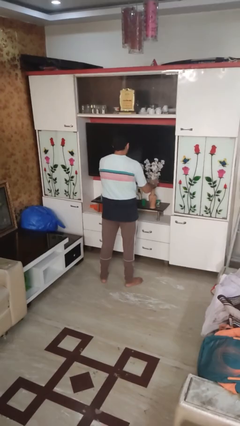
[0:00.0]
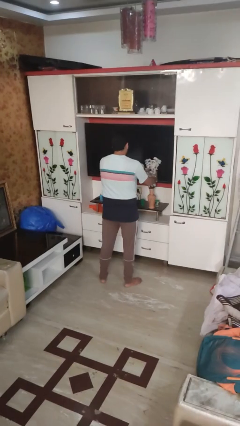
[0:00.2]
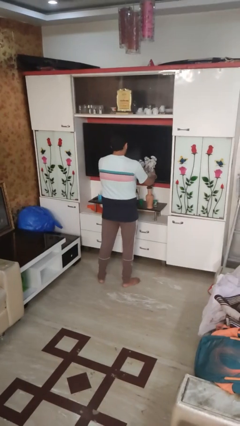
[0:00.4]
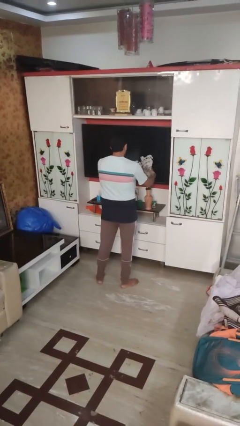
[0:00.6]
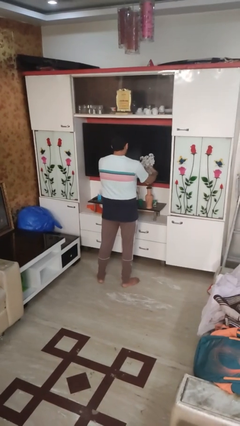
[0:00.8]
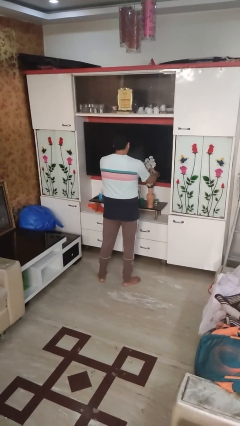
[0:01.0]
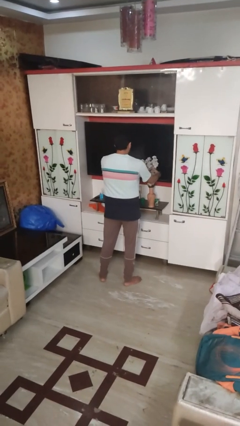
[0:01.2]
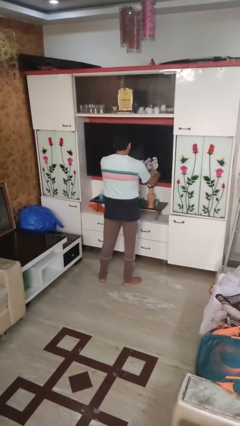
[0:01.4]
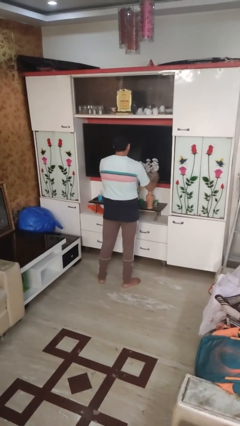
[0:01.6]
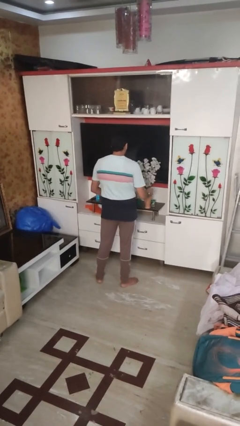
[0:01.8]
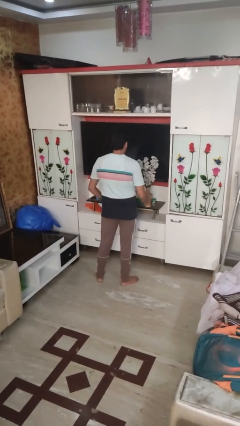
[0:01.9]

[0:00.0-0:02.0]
person arranges flowers in vase

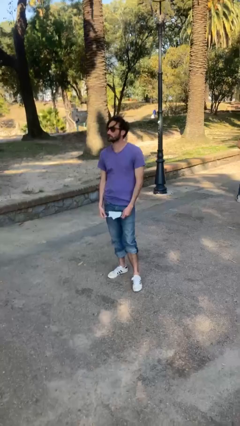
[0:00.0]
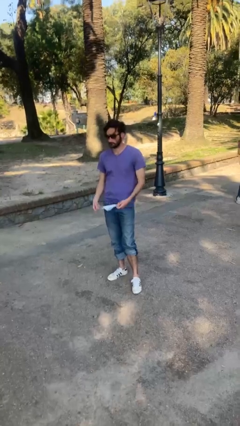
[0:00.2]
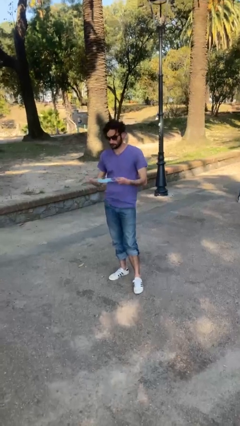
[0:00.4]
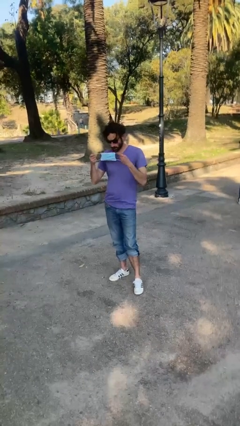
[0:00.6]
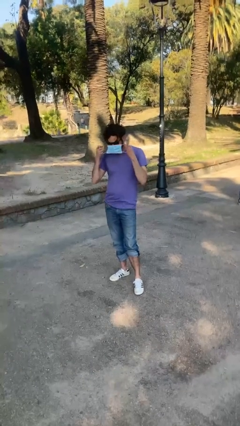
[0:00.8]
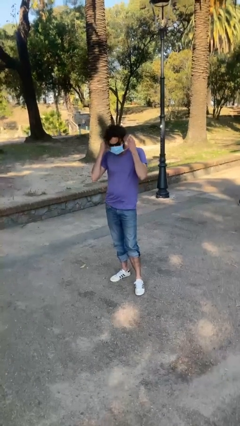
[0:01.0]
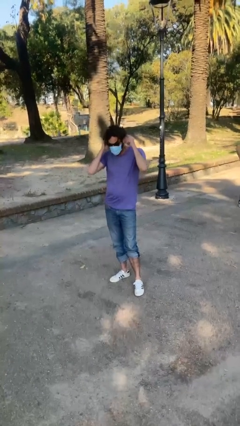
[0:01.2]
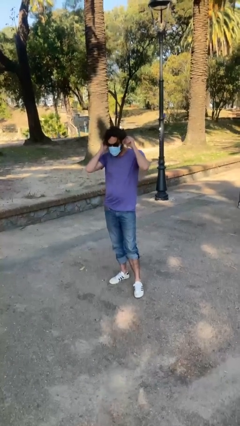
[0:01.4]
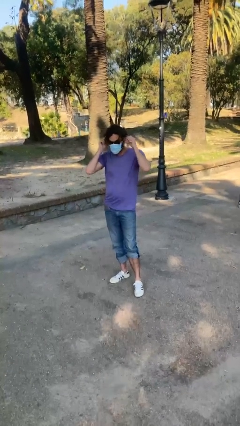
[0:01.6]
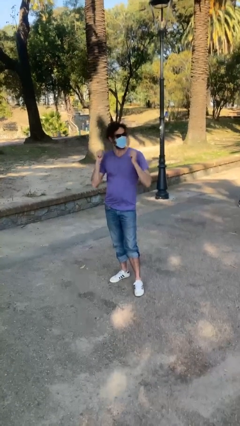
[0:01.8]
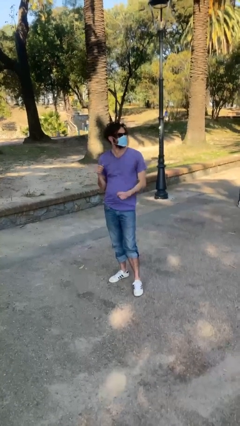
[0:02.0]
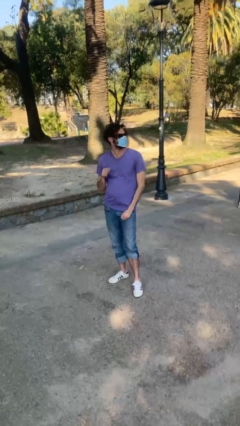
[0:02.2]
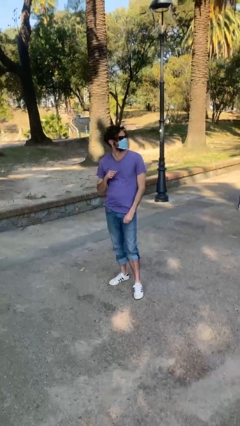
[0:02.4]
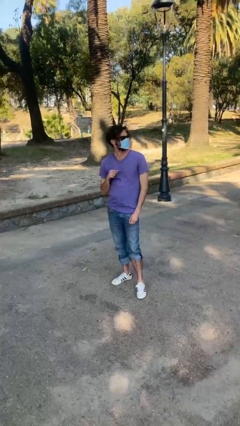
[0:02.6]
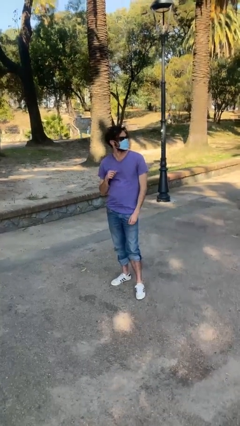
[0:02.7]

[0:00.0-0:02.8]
person puts on facemask

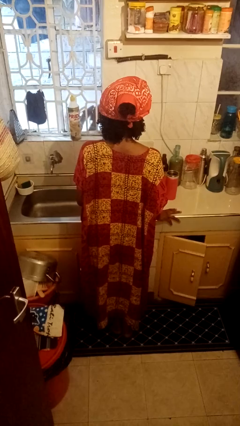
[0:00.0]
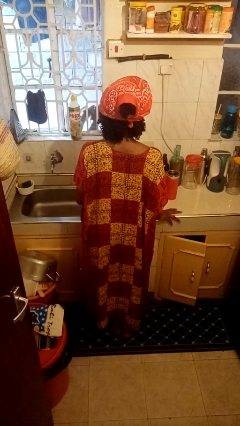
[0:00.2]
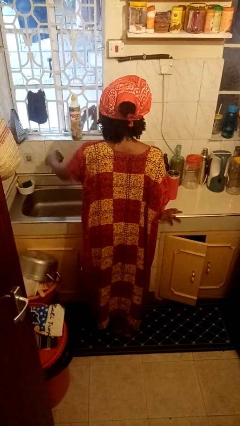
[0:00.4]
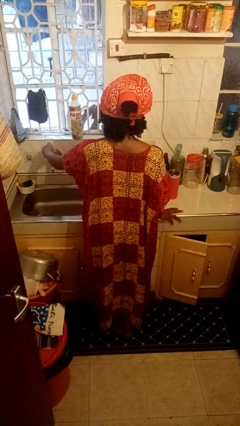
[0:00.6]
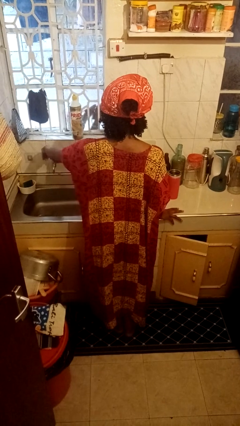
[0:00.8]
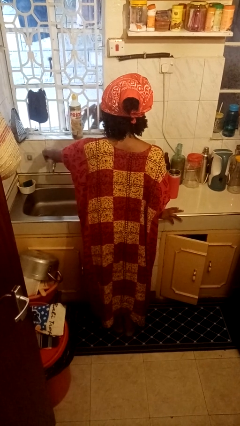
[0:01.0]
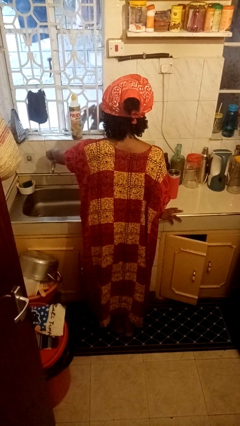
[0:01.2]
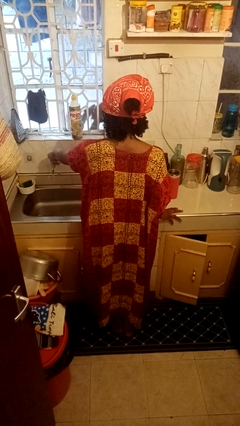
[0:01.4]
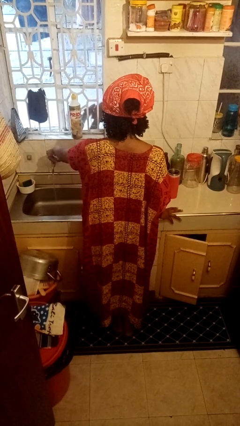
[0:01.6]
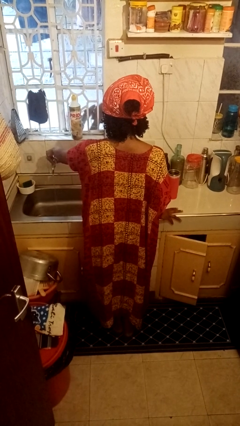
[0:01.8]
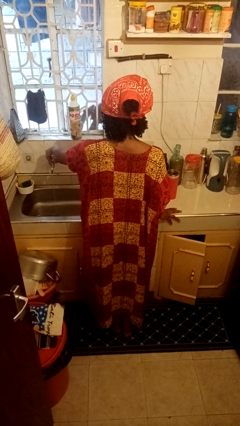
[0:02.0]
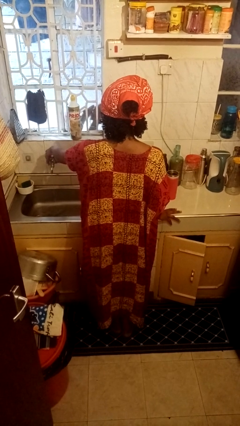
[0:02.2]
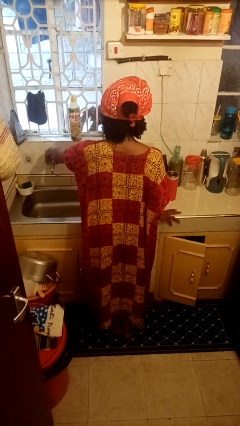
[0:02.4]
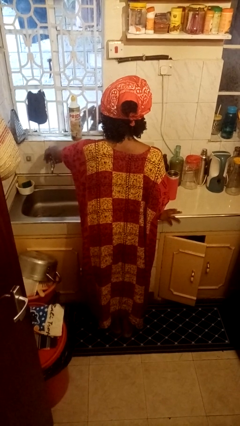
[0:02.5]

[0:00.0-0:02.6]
person turns on faucet

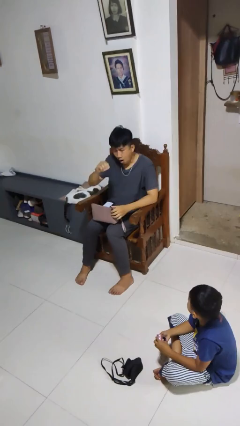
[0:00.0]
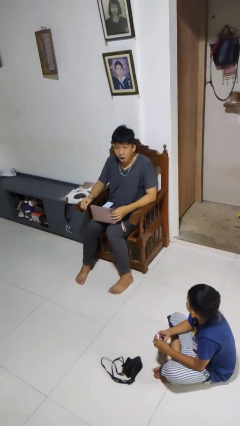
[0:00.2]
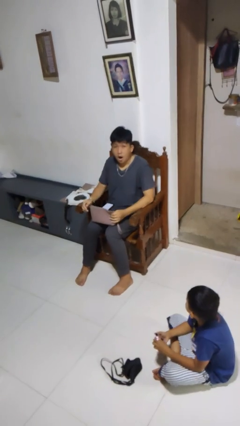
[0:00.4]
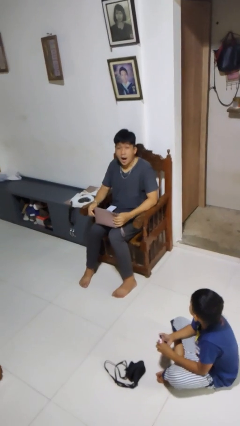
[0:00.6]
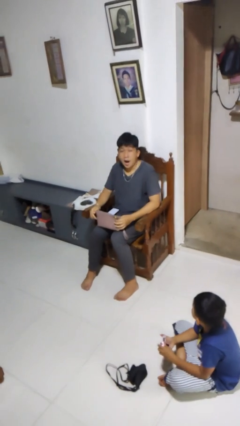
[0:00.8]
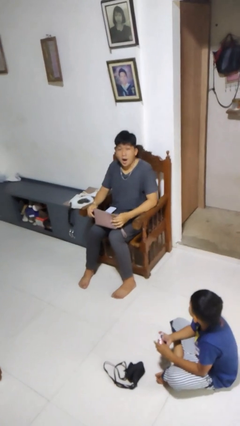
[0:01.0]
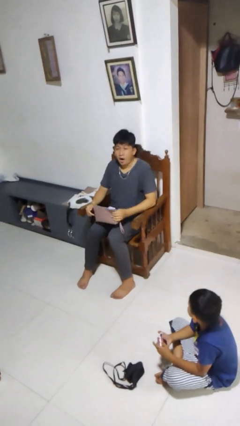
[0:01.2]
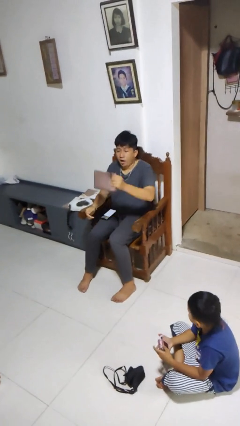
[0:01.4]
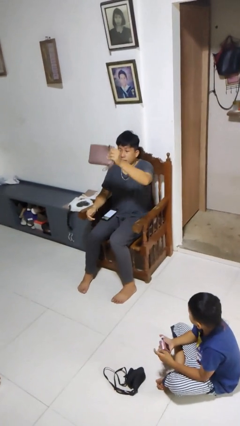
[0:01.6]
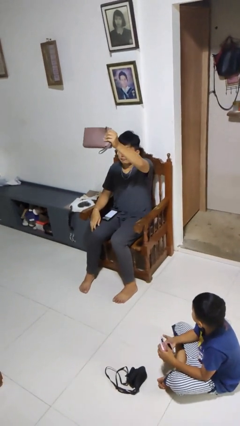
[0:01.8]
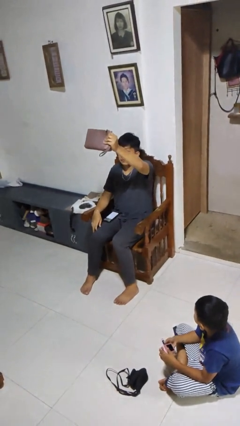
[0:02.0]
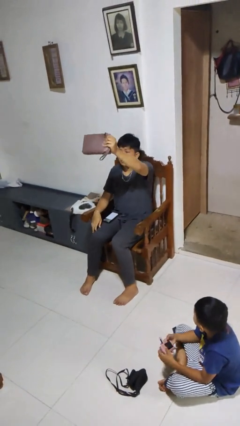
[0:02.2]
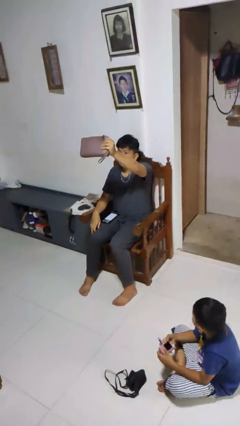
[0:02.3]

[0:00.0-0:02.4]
person holds object above head

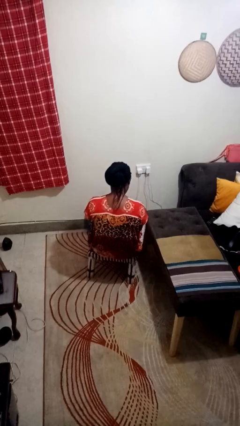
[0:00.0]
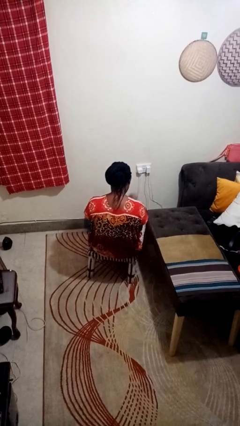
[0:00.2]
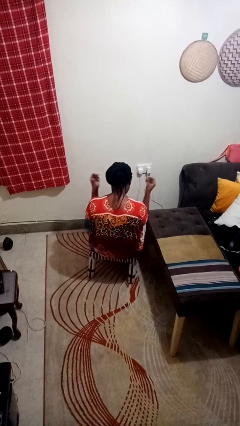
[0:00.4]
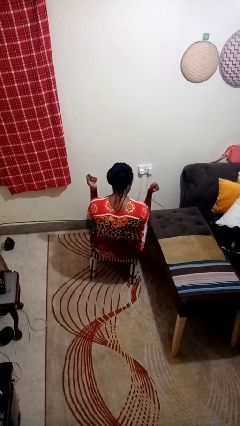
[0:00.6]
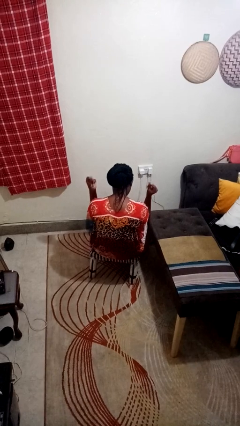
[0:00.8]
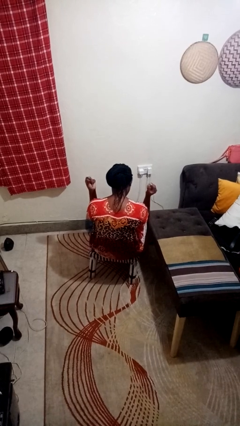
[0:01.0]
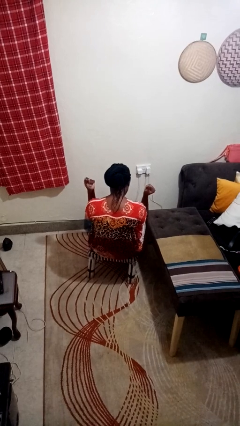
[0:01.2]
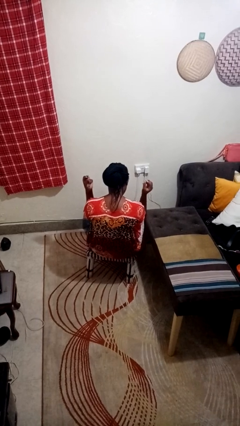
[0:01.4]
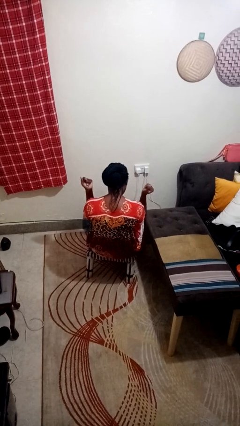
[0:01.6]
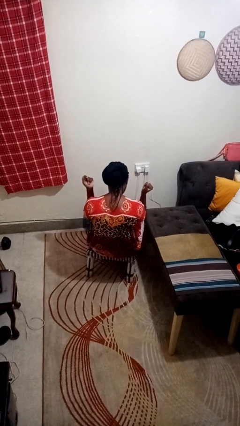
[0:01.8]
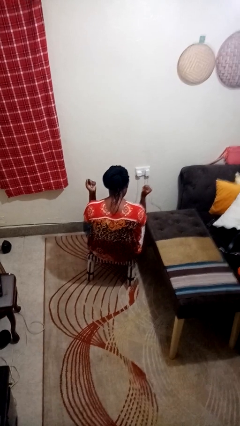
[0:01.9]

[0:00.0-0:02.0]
person snaps fingers

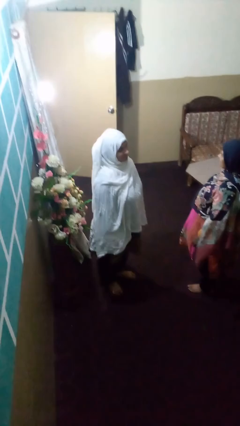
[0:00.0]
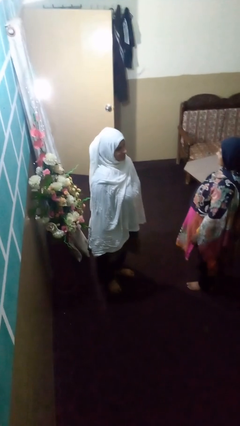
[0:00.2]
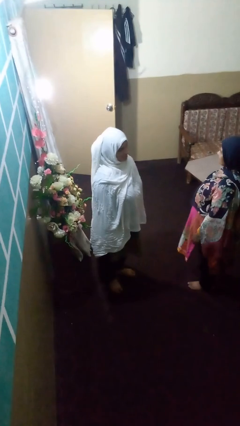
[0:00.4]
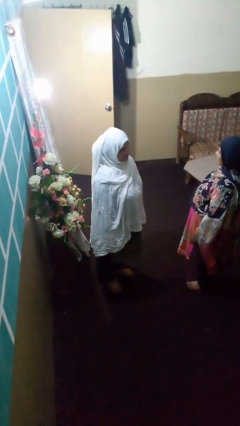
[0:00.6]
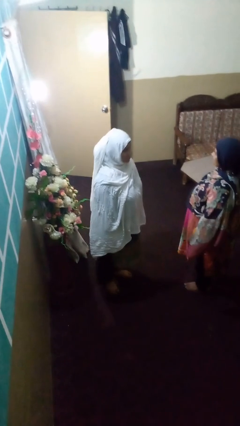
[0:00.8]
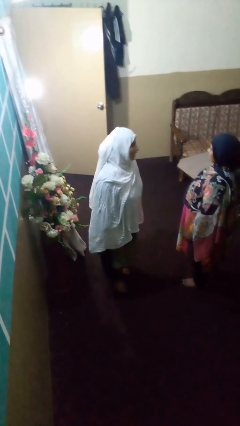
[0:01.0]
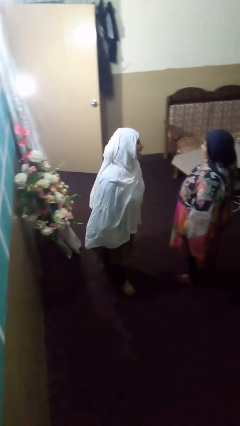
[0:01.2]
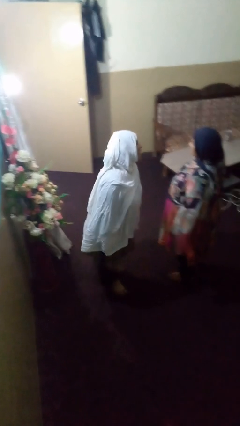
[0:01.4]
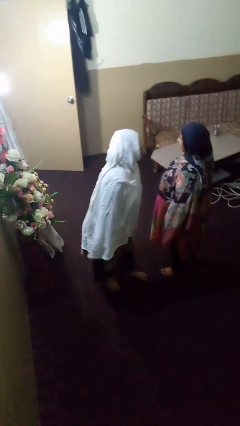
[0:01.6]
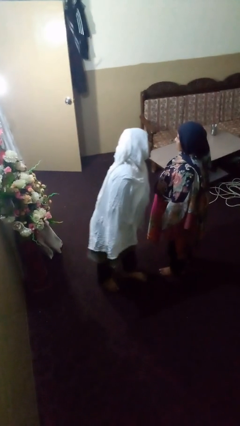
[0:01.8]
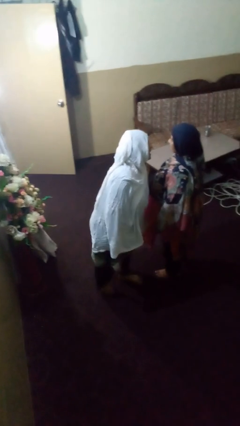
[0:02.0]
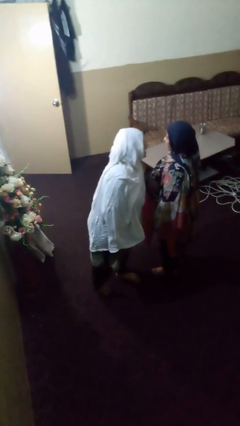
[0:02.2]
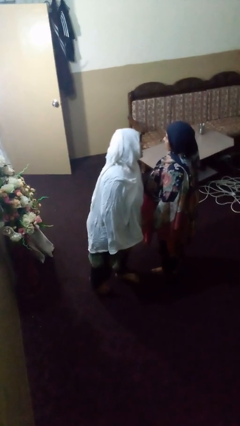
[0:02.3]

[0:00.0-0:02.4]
person laughs with person

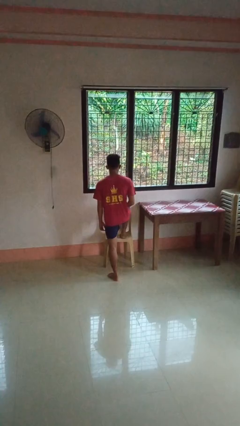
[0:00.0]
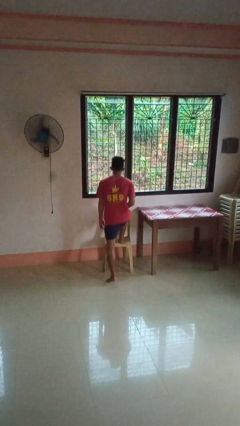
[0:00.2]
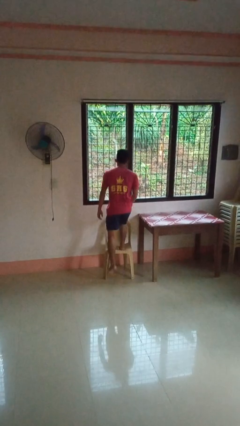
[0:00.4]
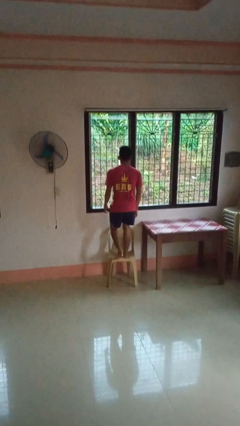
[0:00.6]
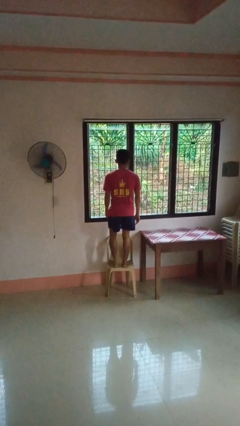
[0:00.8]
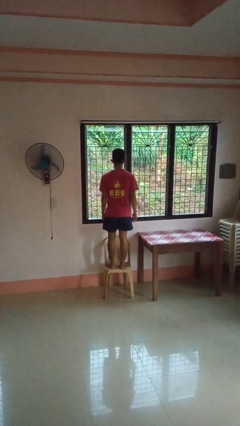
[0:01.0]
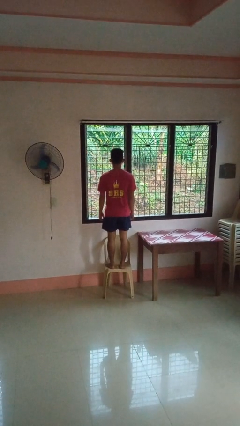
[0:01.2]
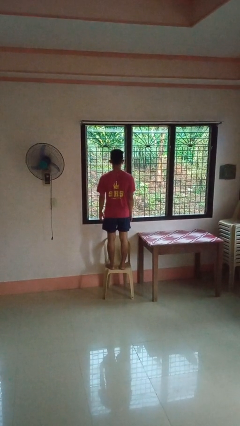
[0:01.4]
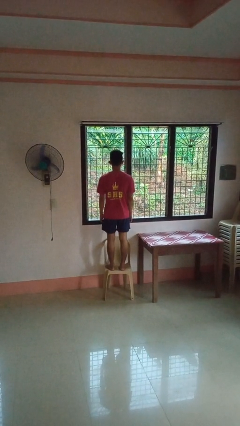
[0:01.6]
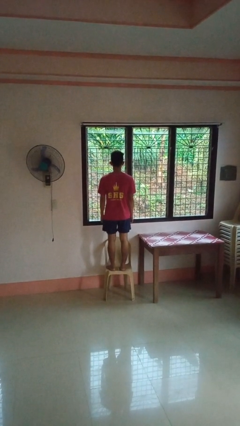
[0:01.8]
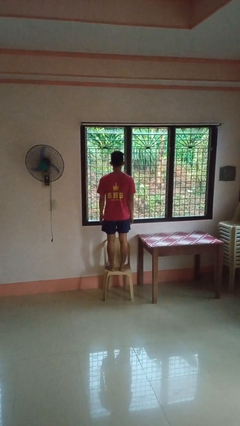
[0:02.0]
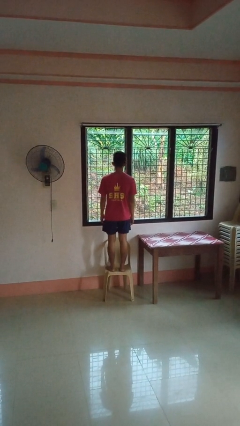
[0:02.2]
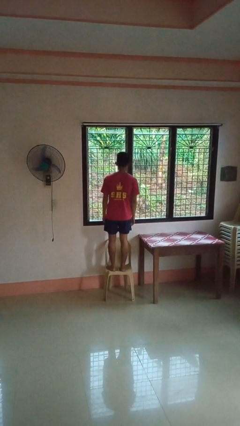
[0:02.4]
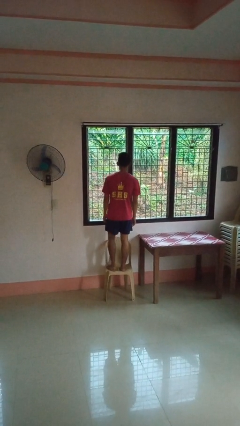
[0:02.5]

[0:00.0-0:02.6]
person climbs on chair

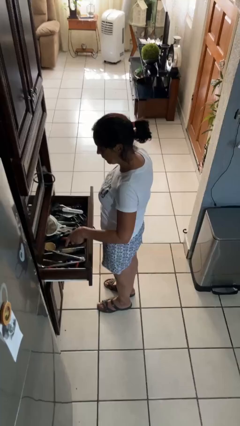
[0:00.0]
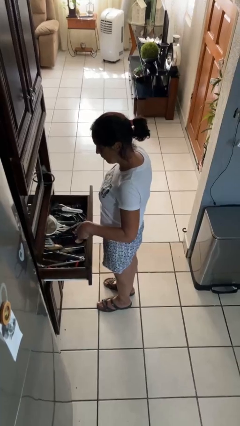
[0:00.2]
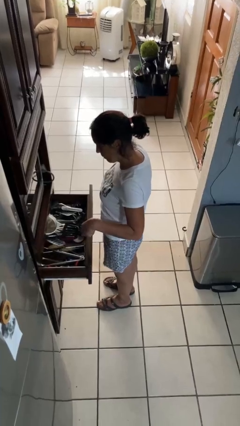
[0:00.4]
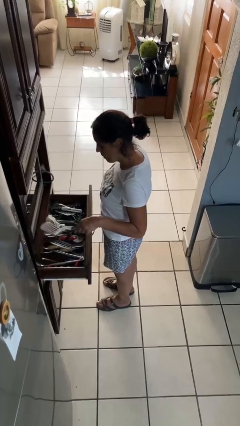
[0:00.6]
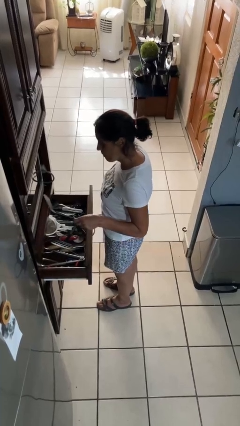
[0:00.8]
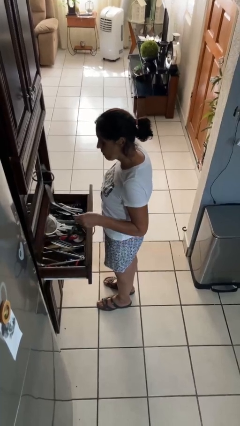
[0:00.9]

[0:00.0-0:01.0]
person takes object from kitchen drawer
